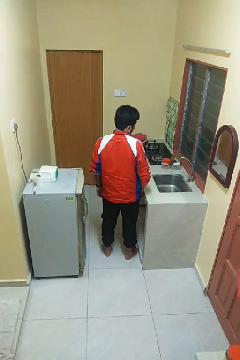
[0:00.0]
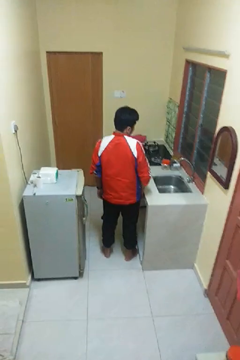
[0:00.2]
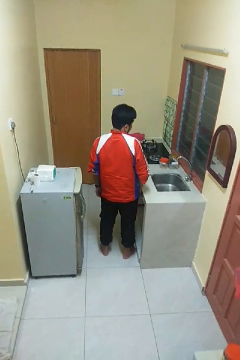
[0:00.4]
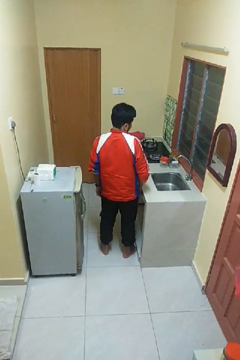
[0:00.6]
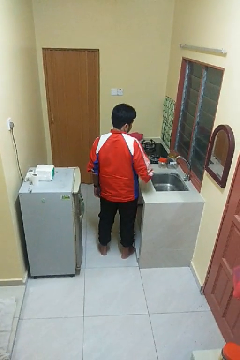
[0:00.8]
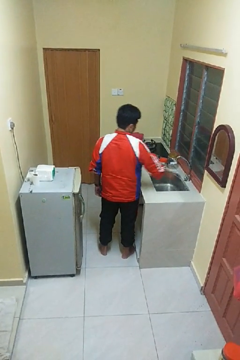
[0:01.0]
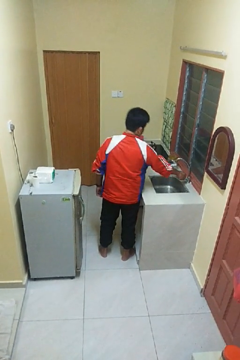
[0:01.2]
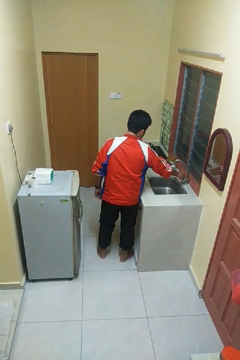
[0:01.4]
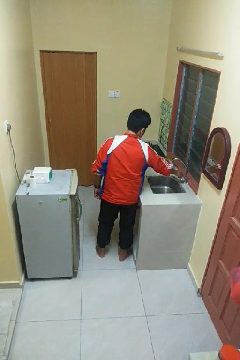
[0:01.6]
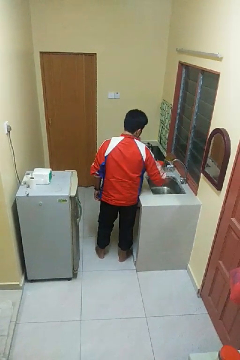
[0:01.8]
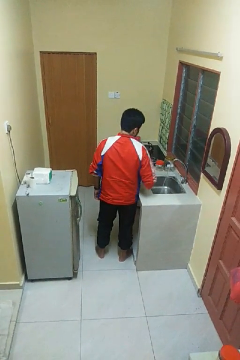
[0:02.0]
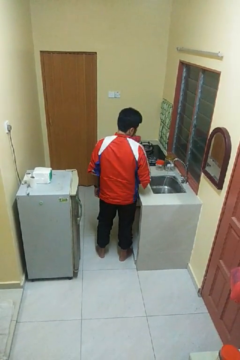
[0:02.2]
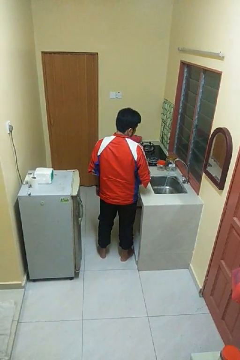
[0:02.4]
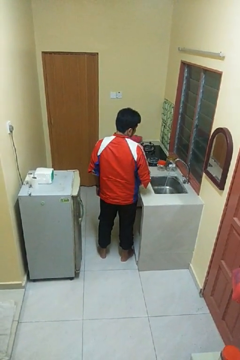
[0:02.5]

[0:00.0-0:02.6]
person turns on faucet

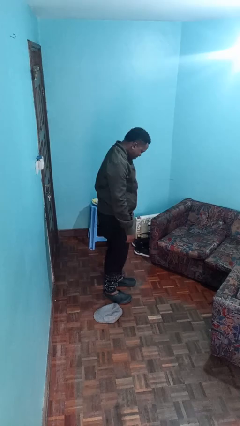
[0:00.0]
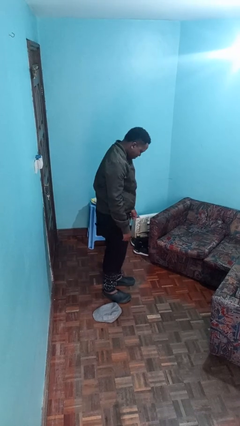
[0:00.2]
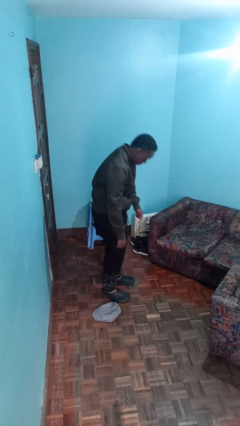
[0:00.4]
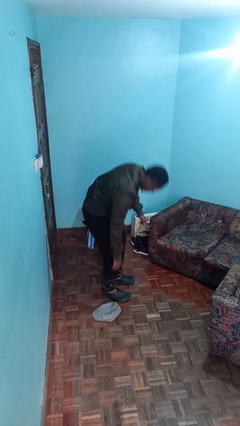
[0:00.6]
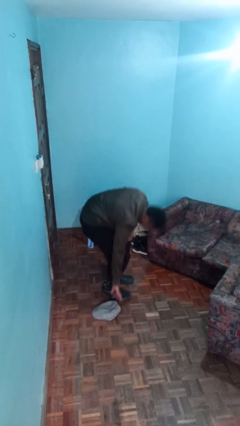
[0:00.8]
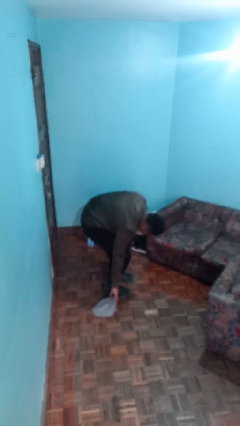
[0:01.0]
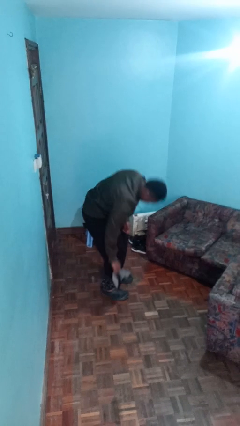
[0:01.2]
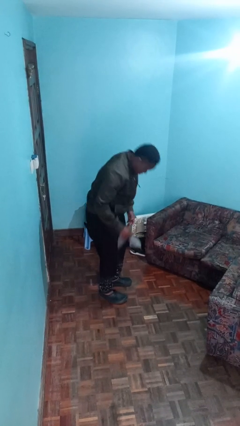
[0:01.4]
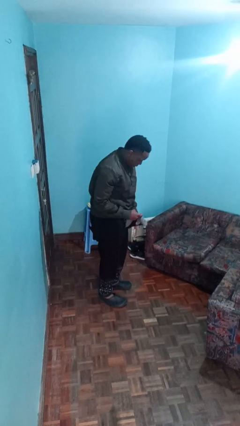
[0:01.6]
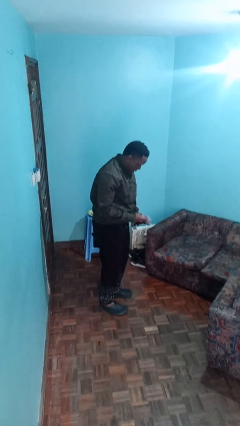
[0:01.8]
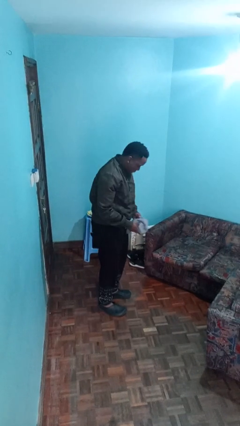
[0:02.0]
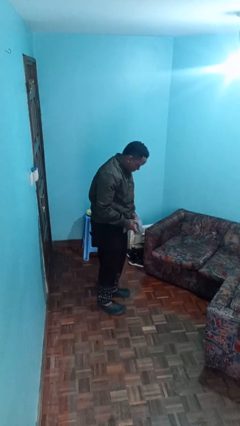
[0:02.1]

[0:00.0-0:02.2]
person picks up object from floor

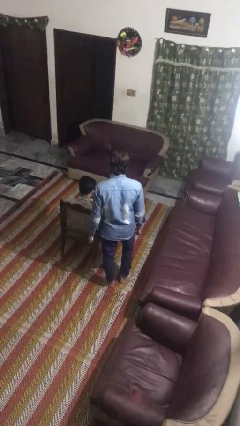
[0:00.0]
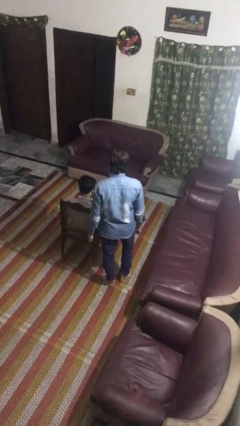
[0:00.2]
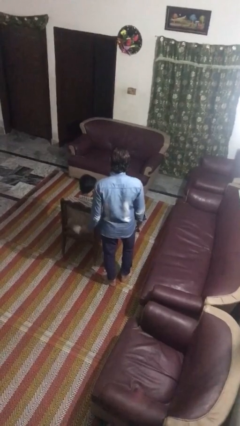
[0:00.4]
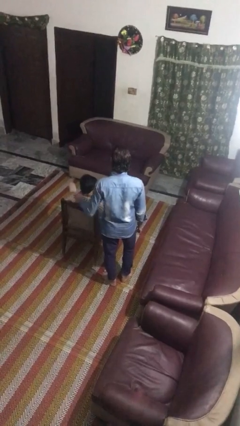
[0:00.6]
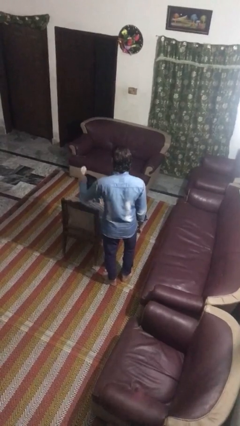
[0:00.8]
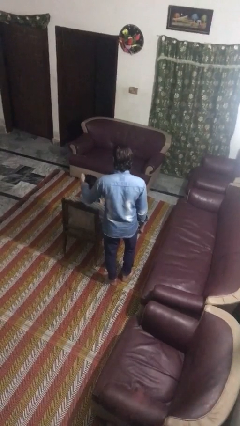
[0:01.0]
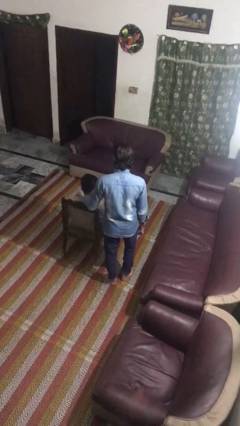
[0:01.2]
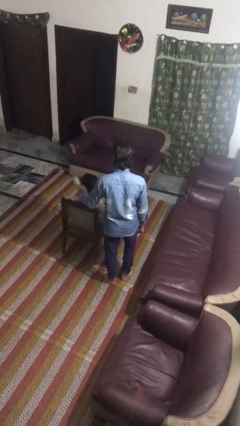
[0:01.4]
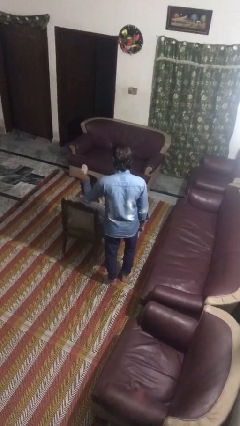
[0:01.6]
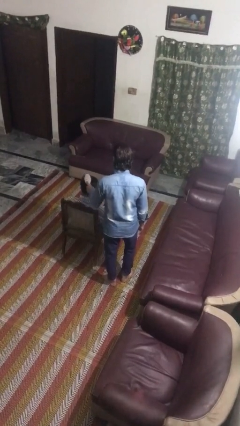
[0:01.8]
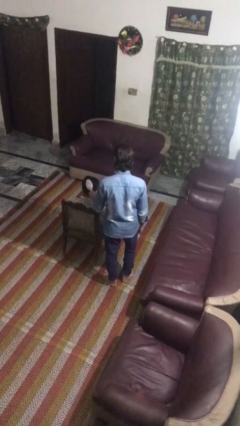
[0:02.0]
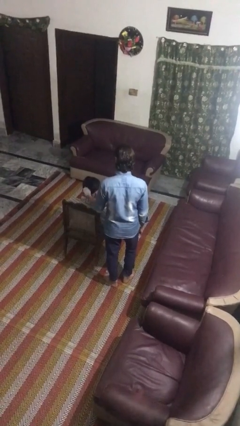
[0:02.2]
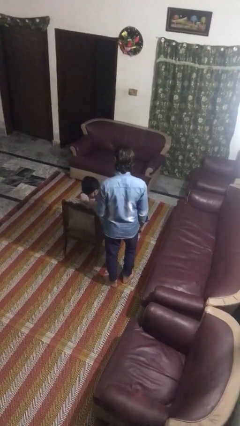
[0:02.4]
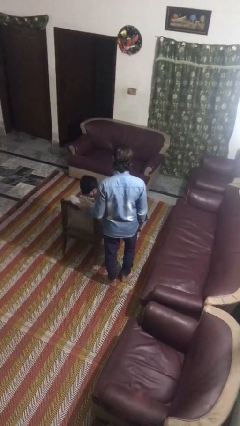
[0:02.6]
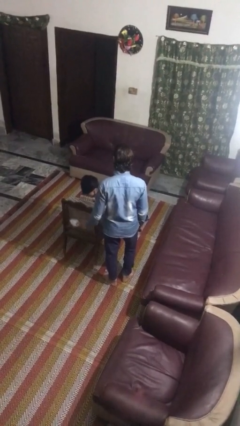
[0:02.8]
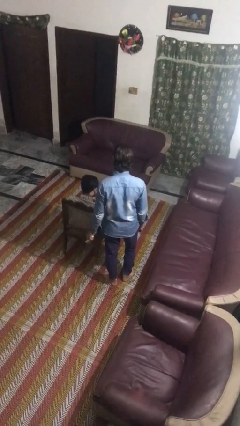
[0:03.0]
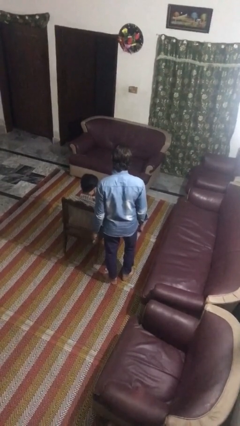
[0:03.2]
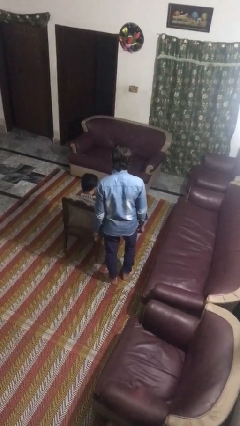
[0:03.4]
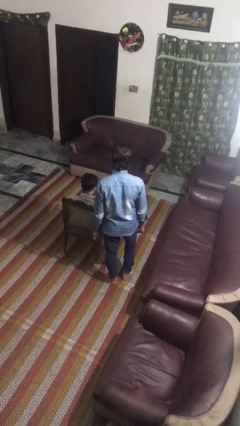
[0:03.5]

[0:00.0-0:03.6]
person brushes hair of person

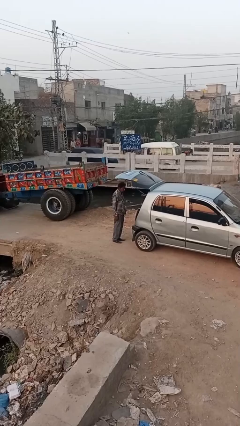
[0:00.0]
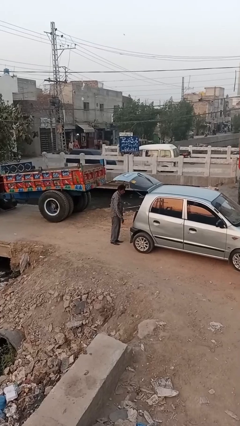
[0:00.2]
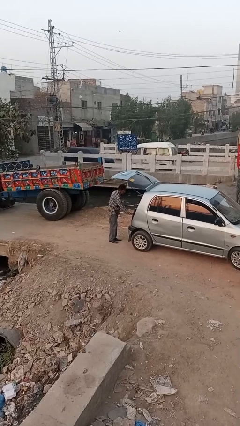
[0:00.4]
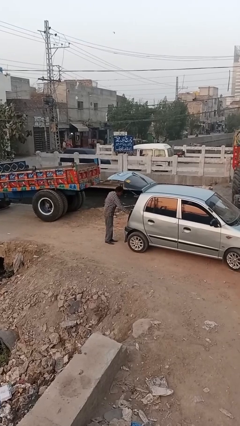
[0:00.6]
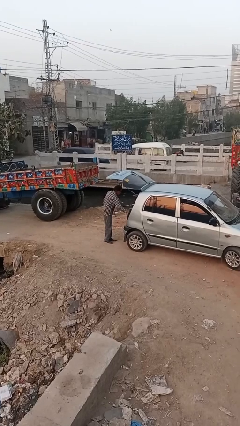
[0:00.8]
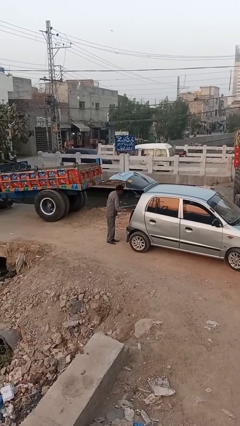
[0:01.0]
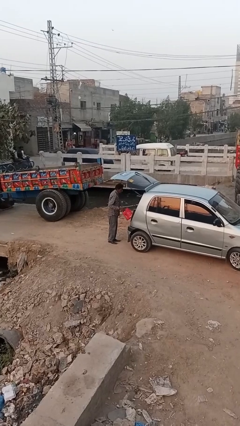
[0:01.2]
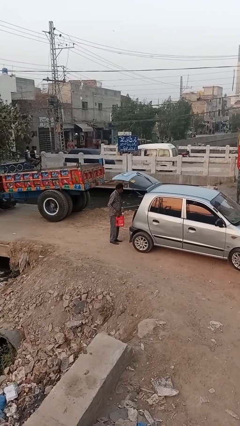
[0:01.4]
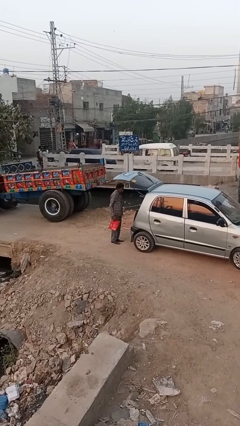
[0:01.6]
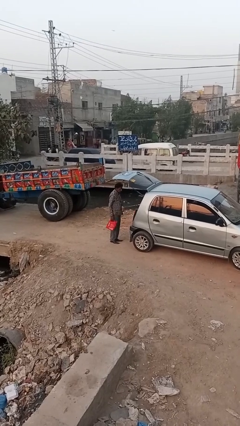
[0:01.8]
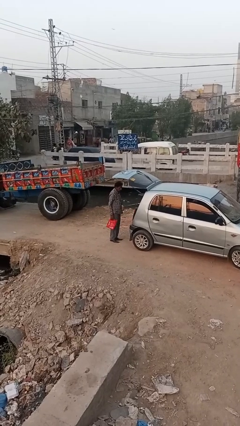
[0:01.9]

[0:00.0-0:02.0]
person unloads car

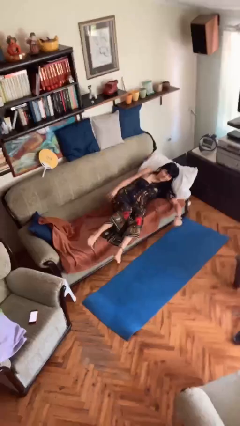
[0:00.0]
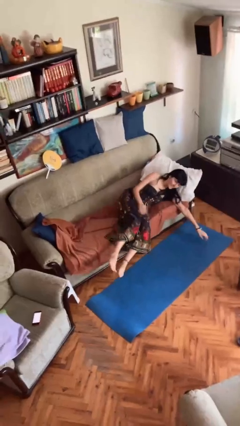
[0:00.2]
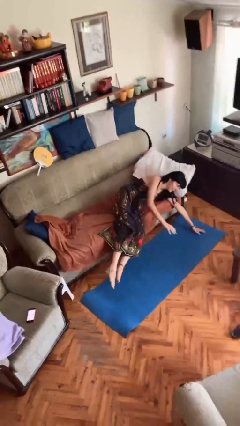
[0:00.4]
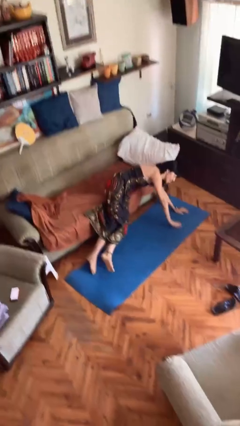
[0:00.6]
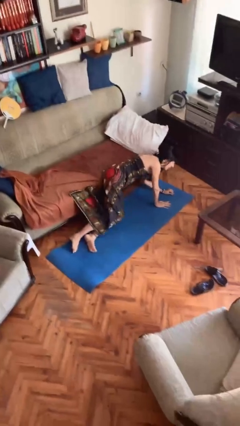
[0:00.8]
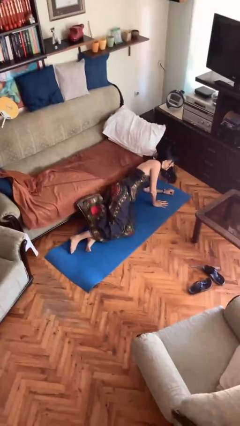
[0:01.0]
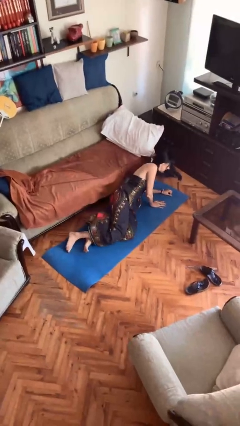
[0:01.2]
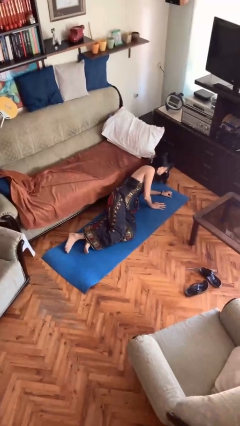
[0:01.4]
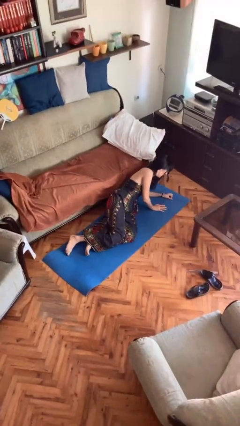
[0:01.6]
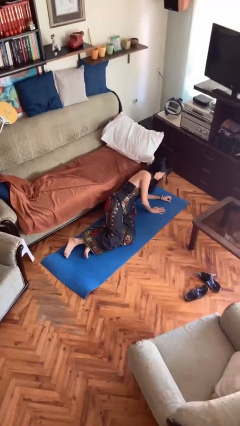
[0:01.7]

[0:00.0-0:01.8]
person falls from bed

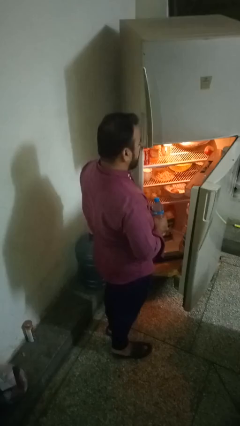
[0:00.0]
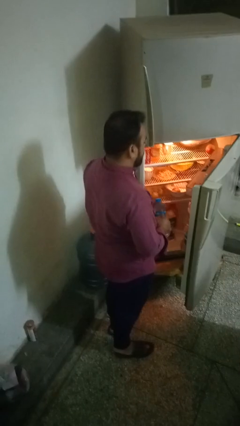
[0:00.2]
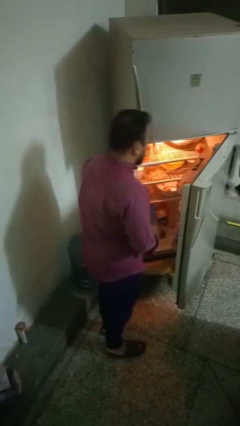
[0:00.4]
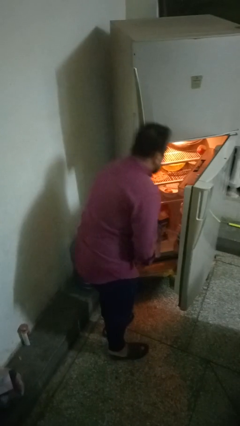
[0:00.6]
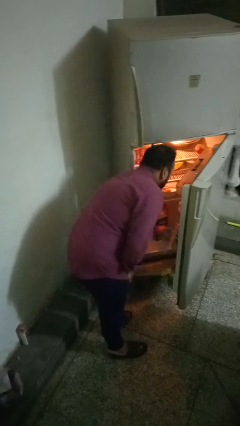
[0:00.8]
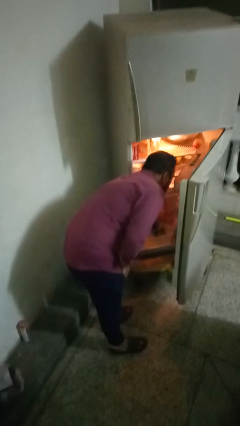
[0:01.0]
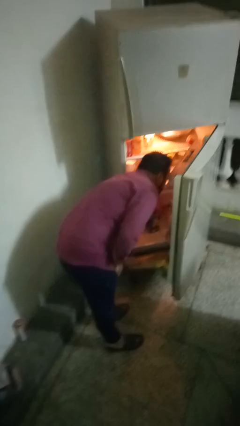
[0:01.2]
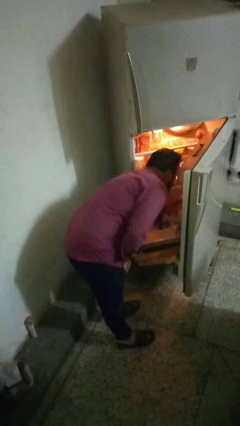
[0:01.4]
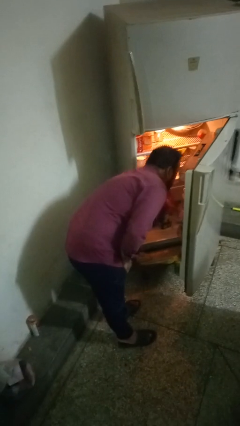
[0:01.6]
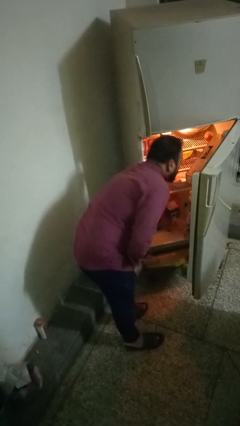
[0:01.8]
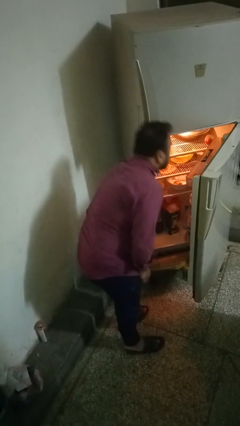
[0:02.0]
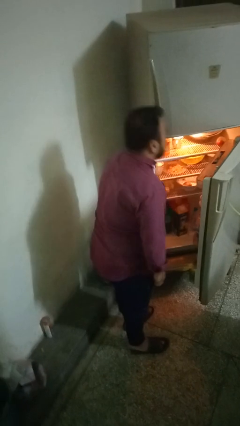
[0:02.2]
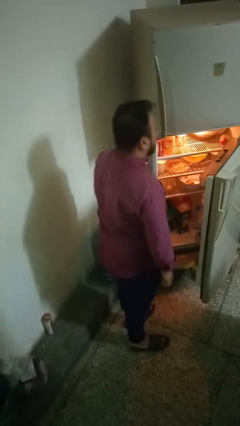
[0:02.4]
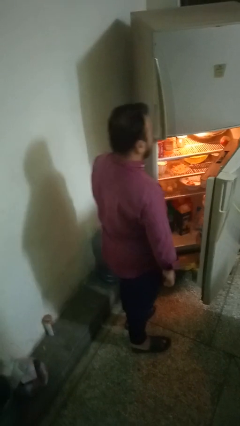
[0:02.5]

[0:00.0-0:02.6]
person puts object into refrigerator

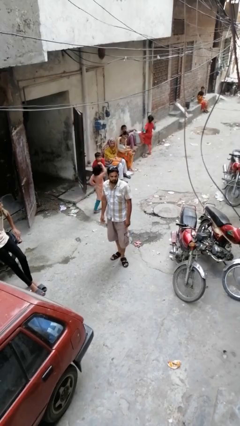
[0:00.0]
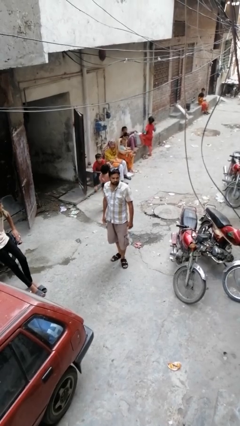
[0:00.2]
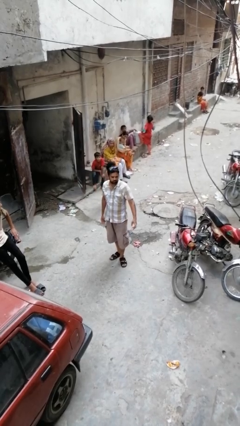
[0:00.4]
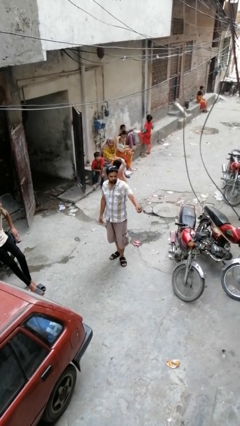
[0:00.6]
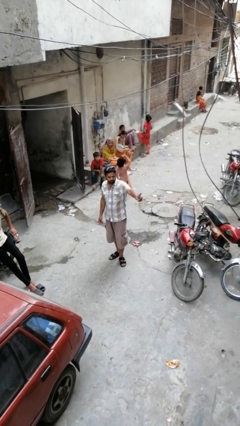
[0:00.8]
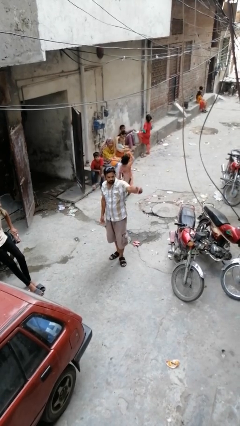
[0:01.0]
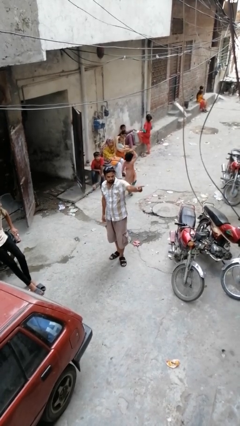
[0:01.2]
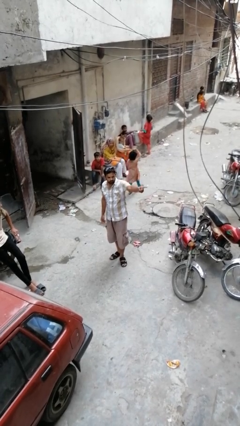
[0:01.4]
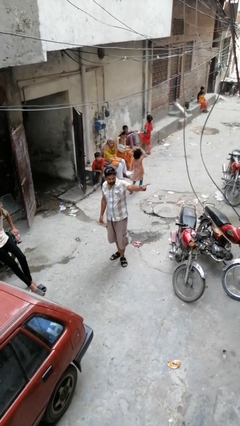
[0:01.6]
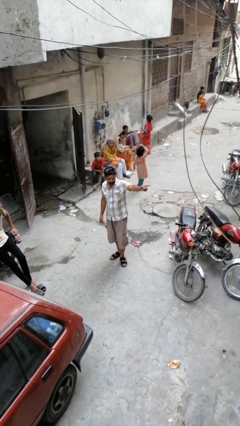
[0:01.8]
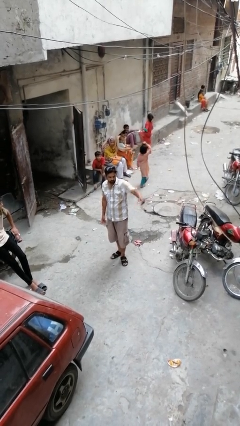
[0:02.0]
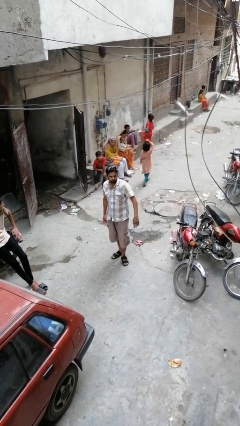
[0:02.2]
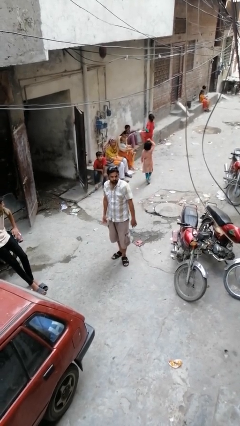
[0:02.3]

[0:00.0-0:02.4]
person points at person

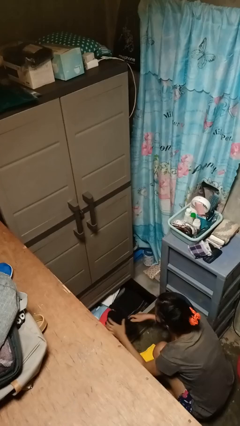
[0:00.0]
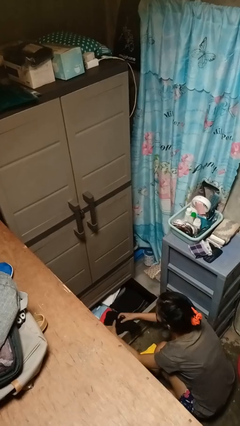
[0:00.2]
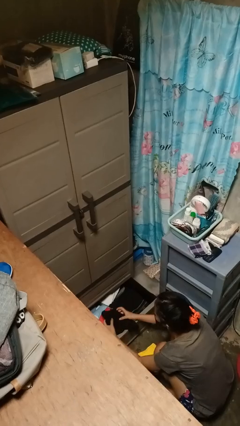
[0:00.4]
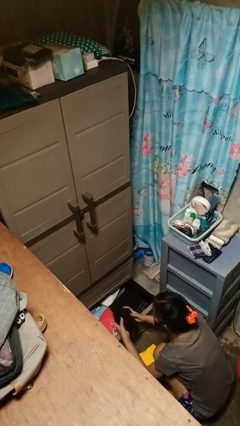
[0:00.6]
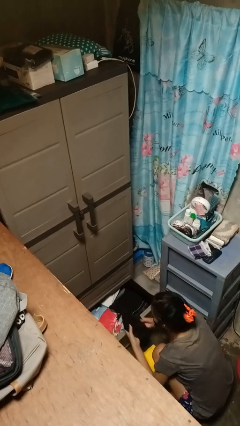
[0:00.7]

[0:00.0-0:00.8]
person takes clothes from dresser
